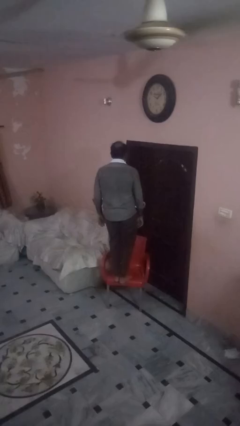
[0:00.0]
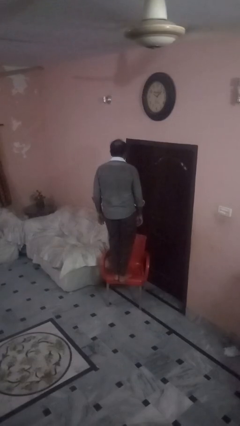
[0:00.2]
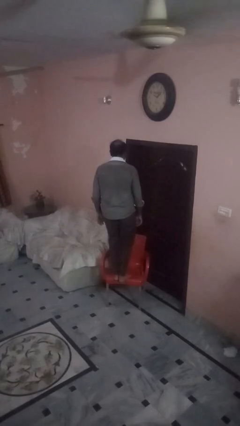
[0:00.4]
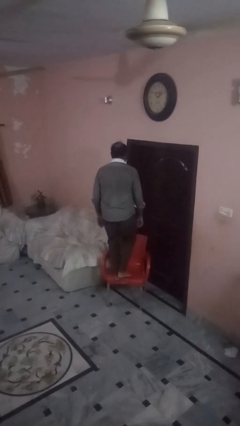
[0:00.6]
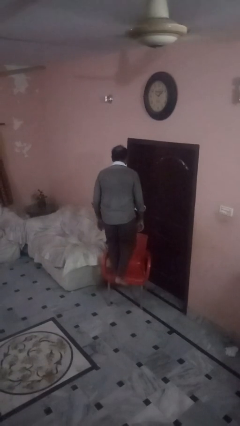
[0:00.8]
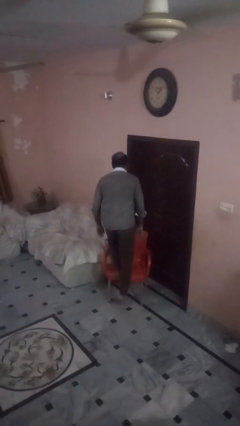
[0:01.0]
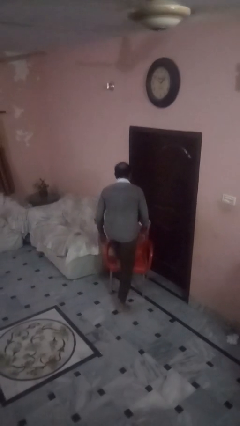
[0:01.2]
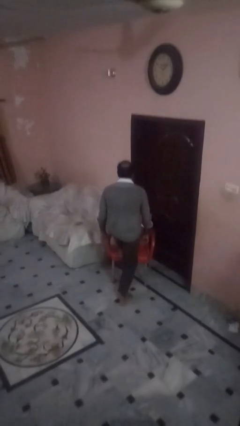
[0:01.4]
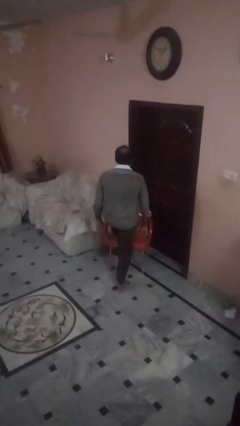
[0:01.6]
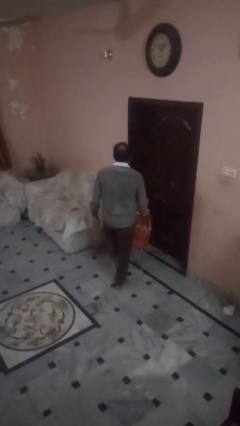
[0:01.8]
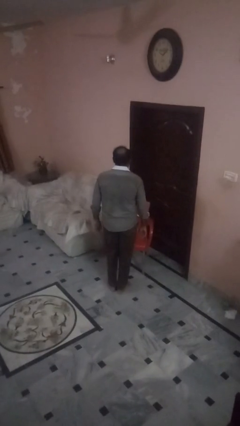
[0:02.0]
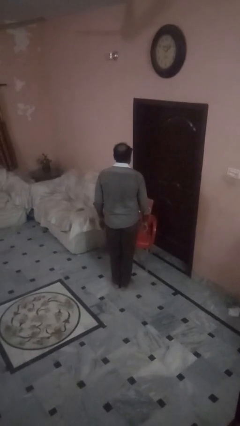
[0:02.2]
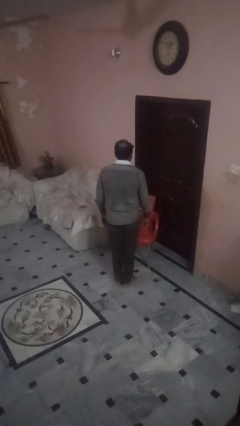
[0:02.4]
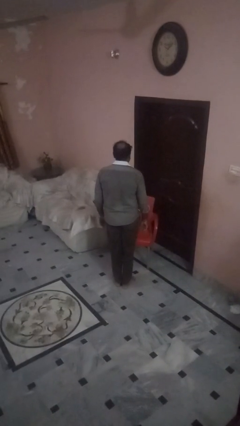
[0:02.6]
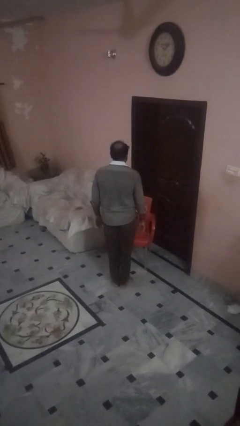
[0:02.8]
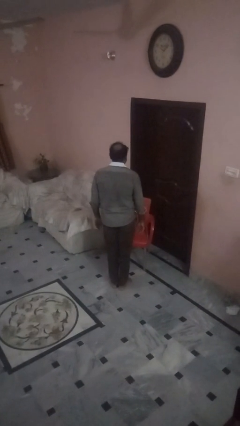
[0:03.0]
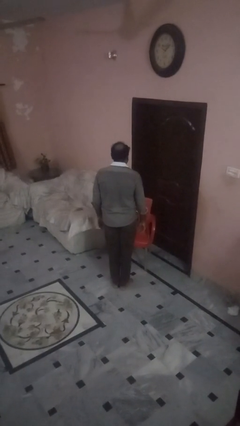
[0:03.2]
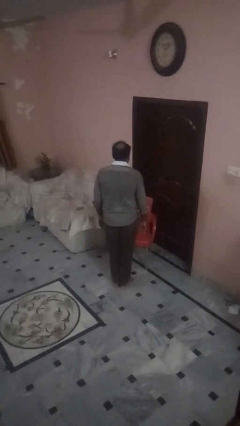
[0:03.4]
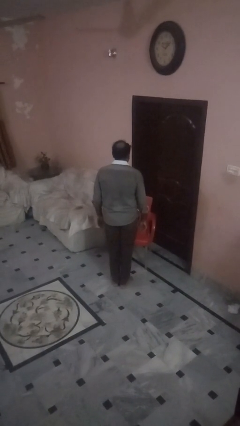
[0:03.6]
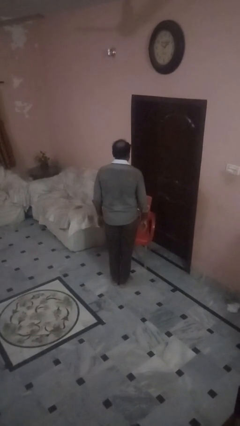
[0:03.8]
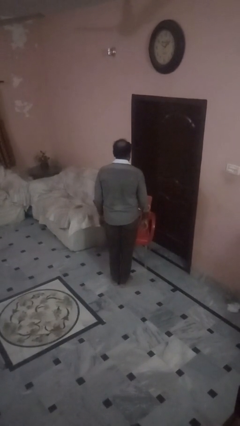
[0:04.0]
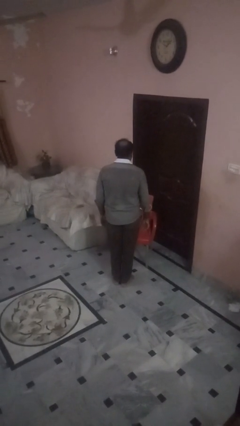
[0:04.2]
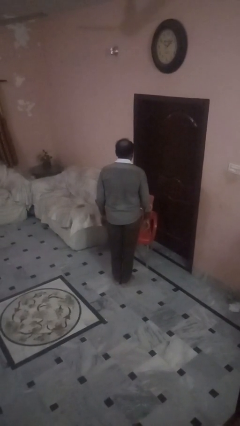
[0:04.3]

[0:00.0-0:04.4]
person climbs off chair

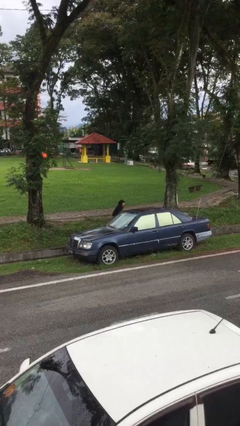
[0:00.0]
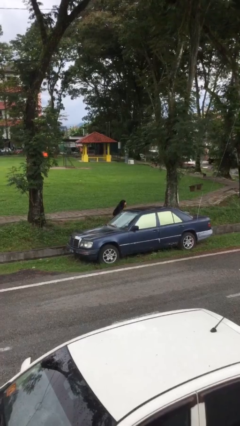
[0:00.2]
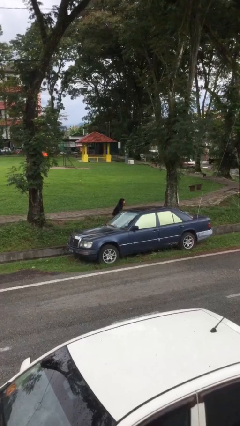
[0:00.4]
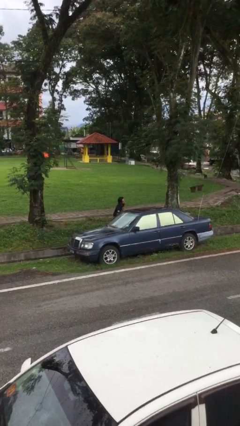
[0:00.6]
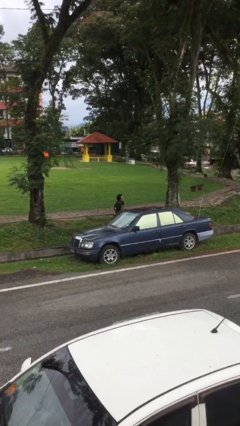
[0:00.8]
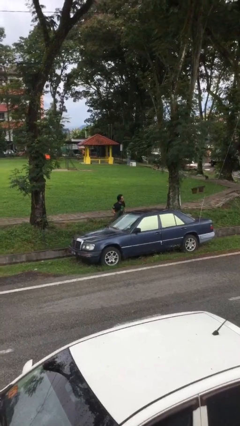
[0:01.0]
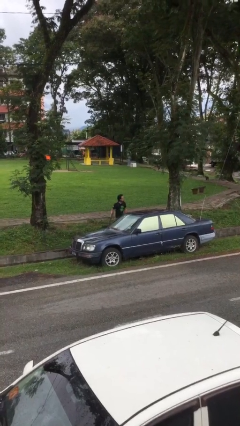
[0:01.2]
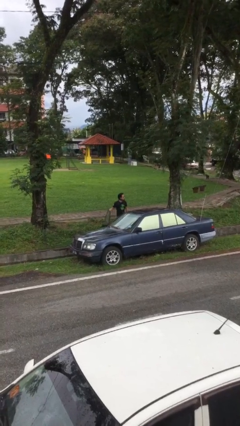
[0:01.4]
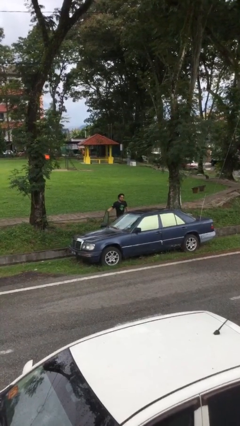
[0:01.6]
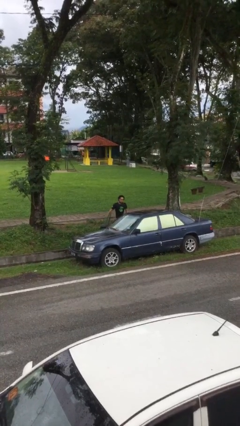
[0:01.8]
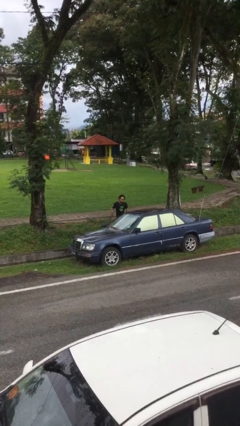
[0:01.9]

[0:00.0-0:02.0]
person opens car door

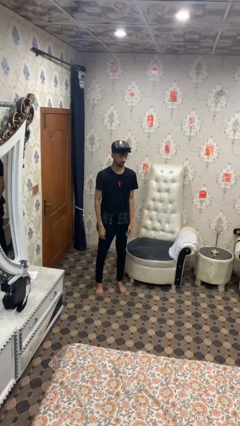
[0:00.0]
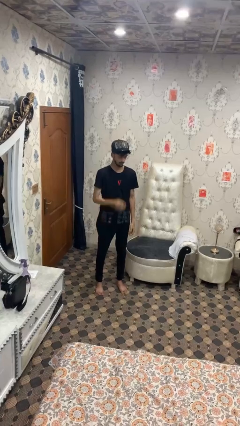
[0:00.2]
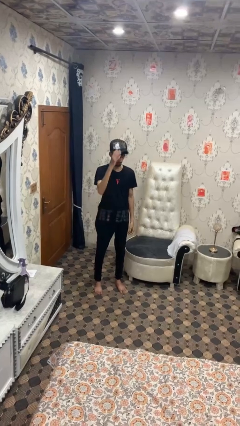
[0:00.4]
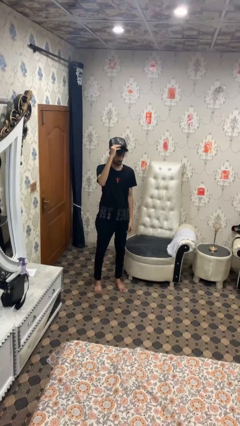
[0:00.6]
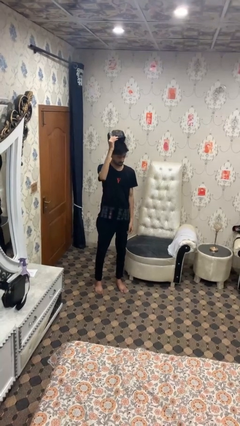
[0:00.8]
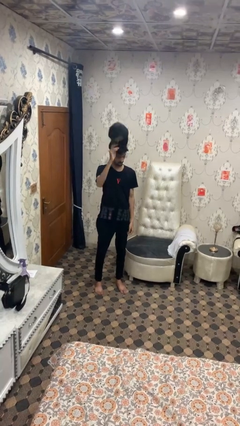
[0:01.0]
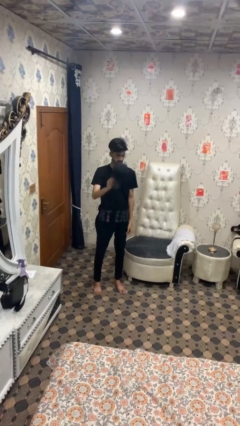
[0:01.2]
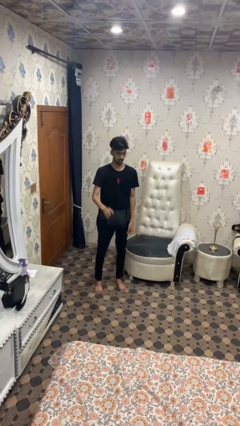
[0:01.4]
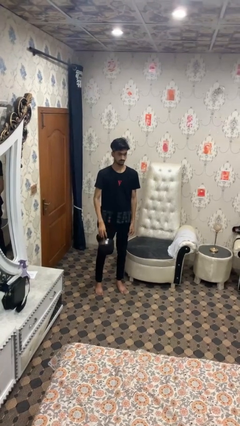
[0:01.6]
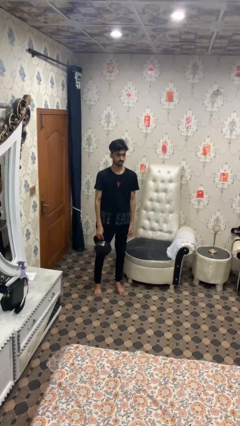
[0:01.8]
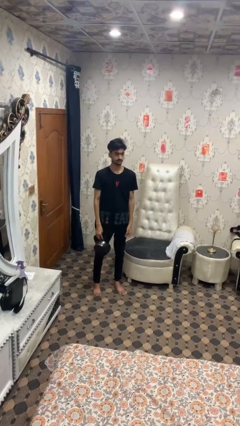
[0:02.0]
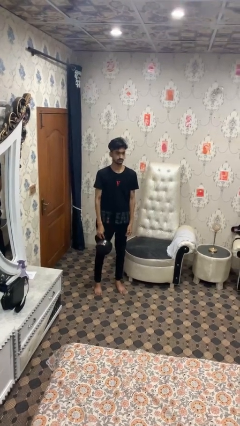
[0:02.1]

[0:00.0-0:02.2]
person takes off hat

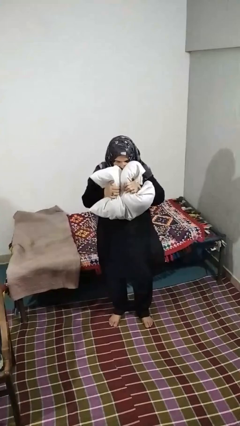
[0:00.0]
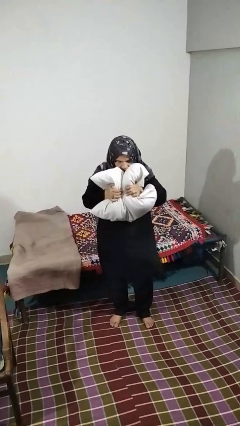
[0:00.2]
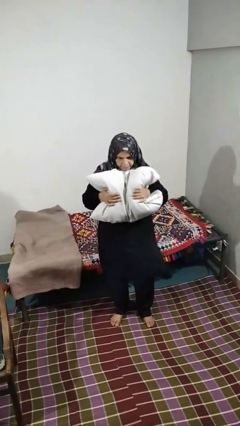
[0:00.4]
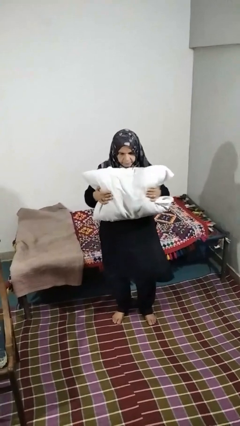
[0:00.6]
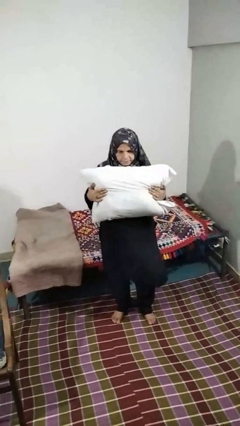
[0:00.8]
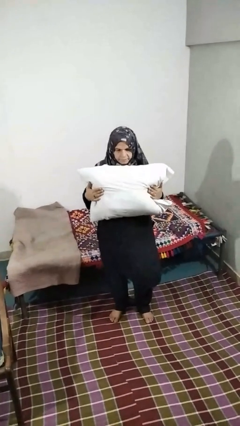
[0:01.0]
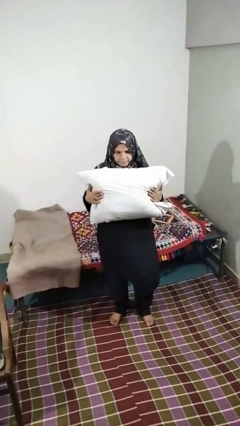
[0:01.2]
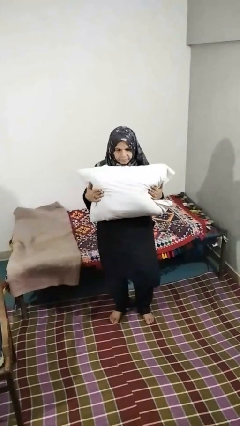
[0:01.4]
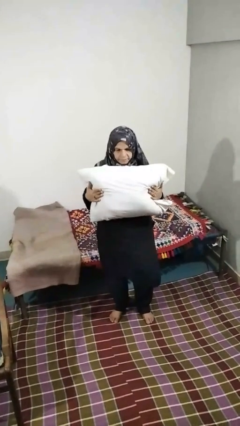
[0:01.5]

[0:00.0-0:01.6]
person squeezes object

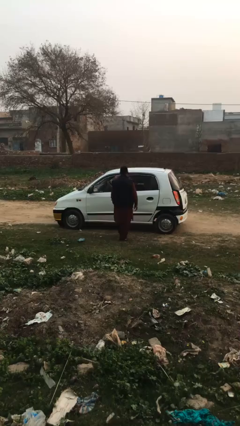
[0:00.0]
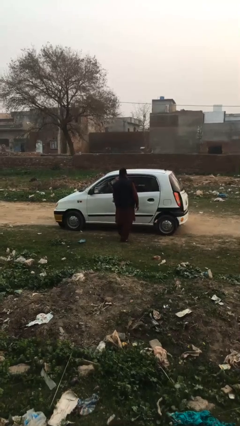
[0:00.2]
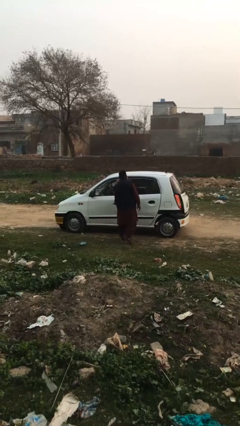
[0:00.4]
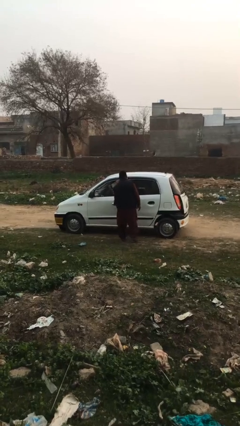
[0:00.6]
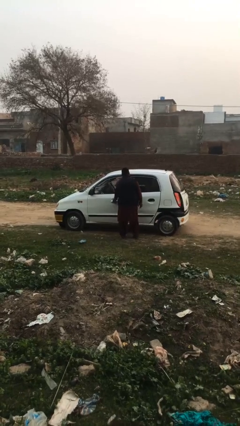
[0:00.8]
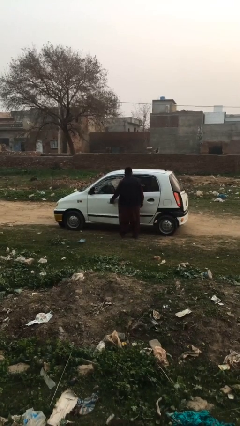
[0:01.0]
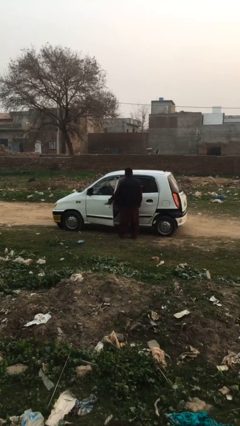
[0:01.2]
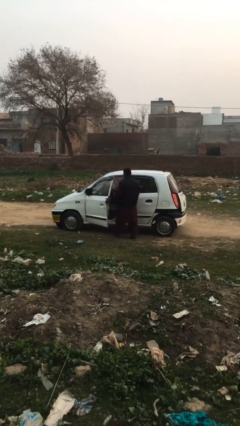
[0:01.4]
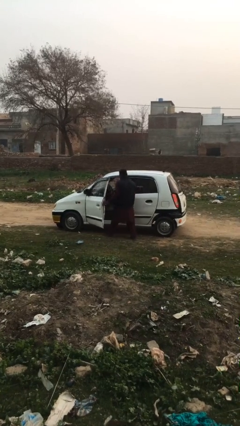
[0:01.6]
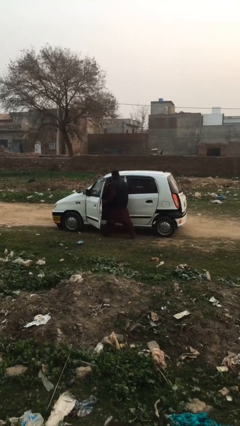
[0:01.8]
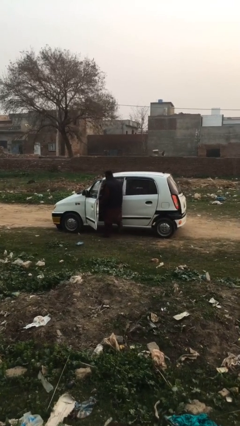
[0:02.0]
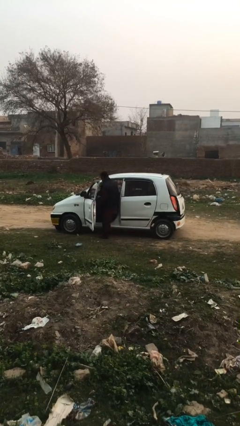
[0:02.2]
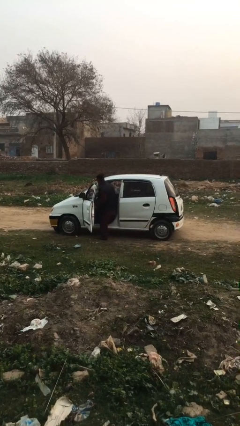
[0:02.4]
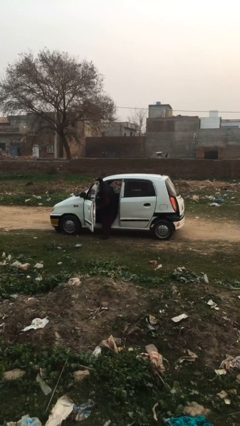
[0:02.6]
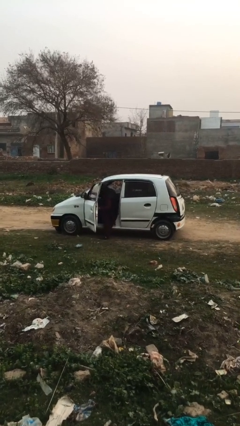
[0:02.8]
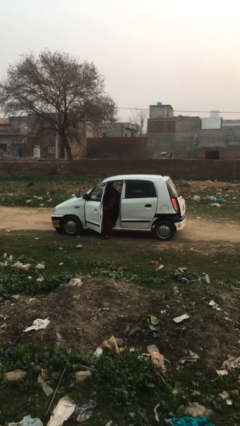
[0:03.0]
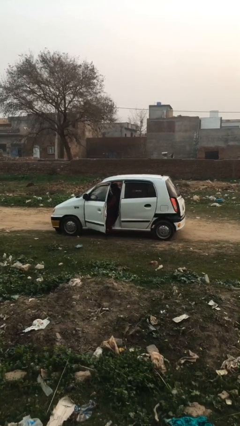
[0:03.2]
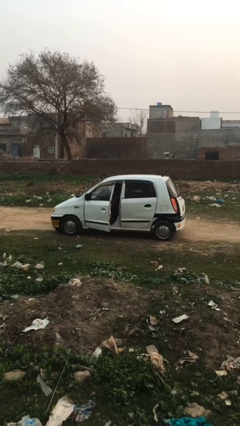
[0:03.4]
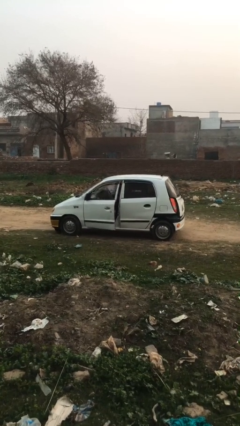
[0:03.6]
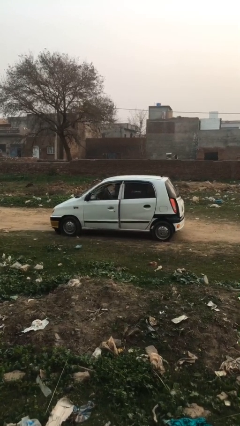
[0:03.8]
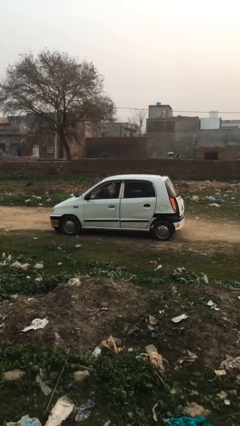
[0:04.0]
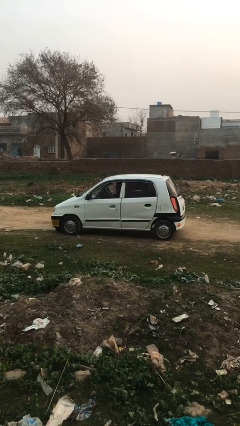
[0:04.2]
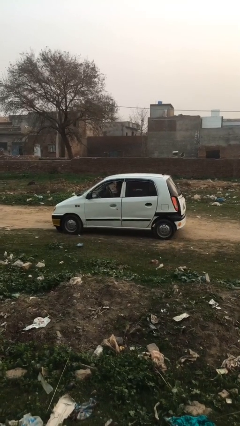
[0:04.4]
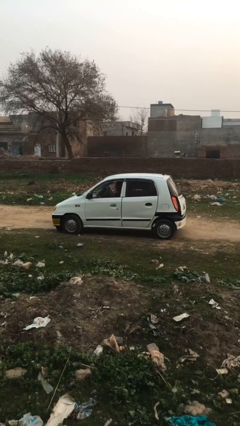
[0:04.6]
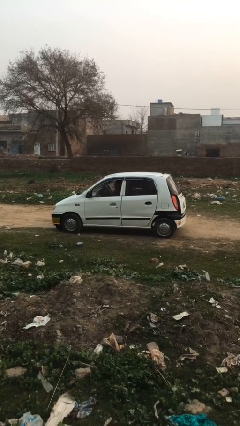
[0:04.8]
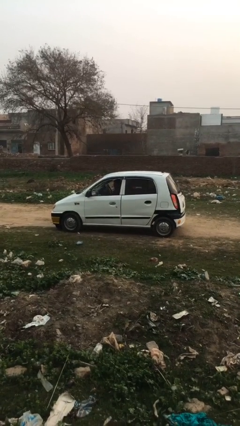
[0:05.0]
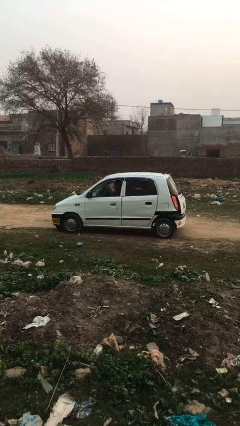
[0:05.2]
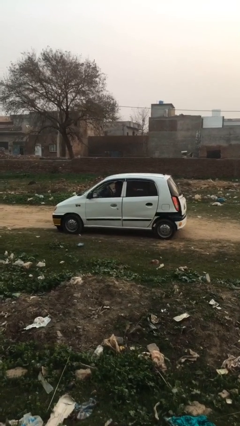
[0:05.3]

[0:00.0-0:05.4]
car picks up person

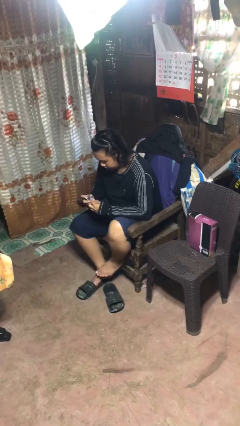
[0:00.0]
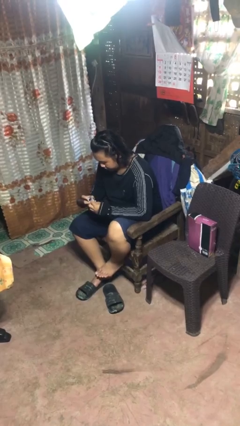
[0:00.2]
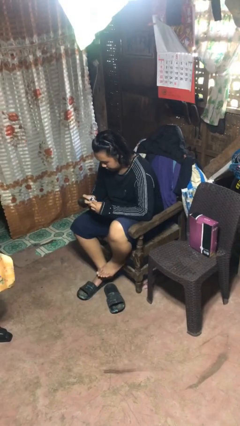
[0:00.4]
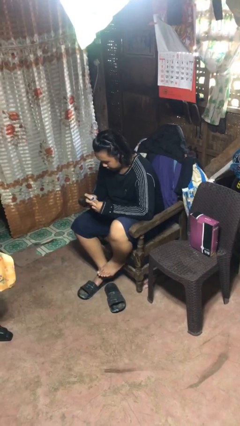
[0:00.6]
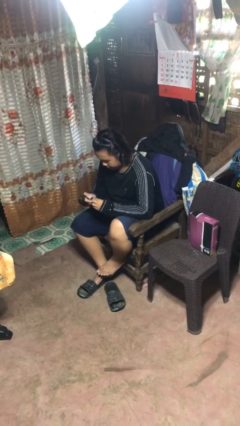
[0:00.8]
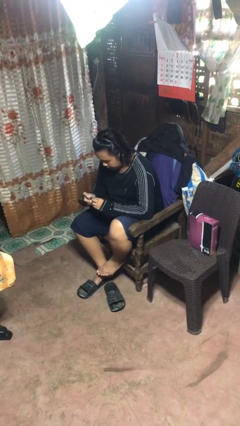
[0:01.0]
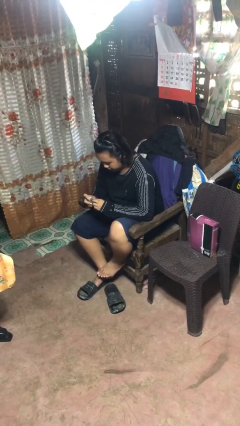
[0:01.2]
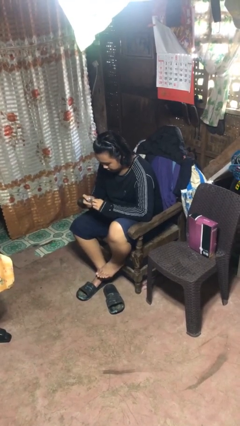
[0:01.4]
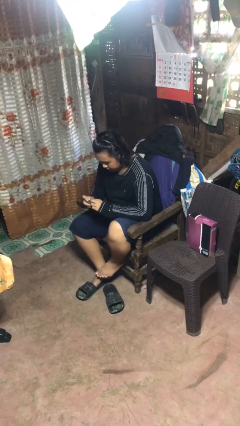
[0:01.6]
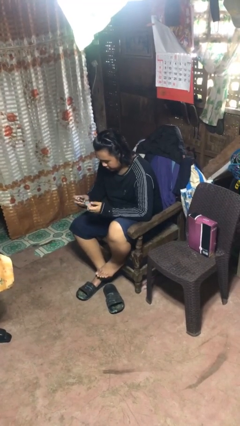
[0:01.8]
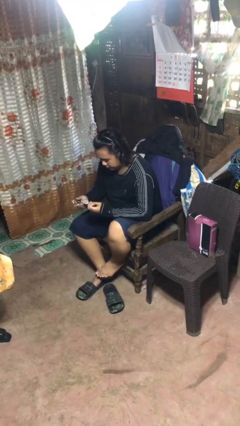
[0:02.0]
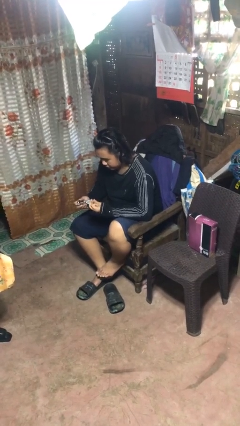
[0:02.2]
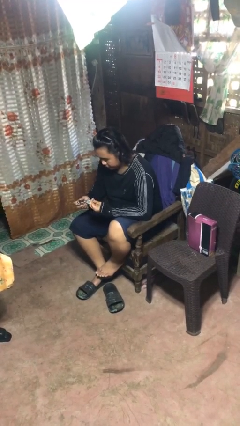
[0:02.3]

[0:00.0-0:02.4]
person files fingernails
